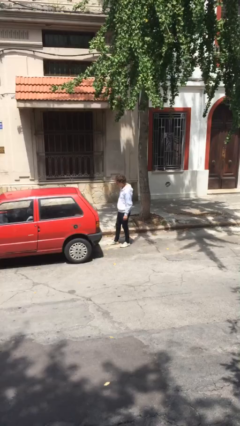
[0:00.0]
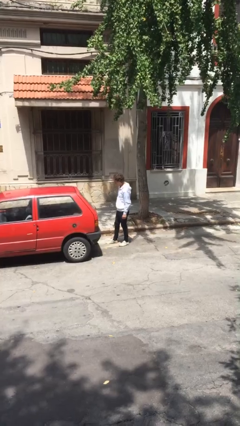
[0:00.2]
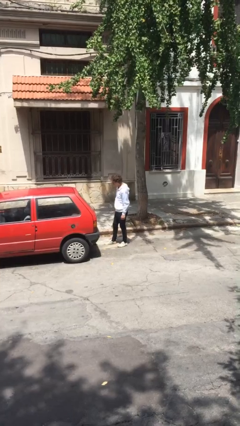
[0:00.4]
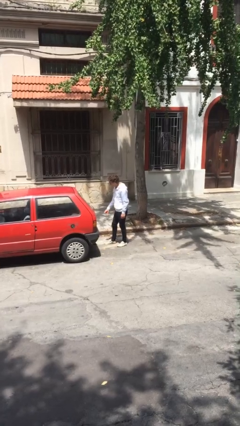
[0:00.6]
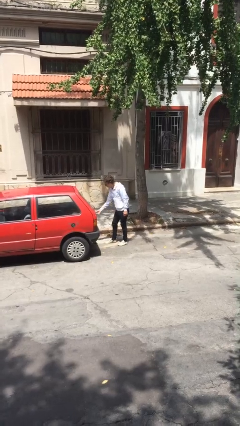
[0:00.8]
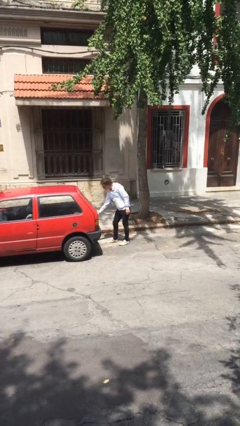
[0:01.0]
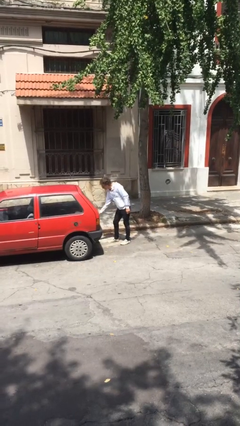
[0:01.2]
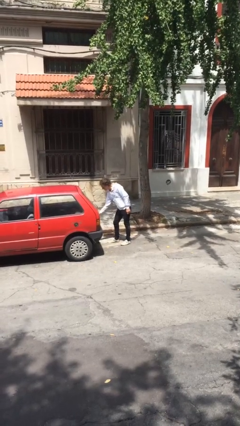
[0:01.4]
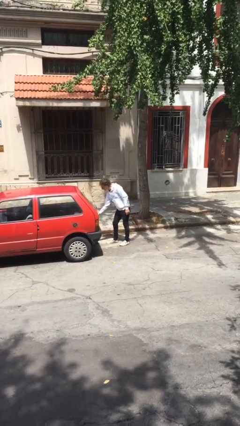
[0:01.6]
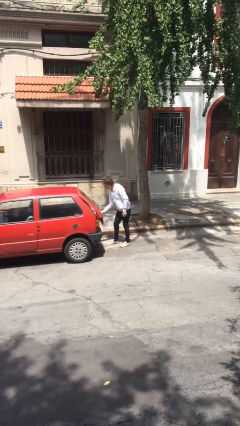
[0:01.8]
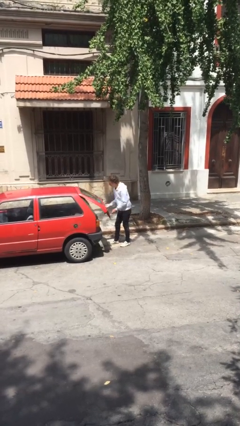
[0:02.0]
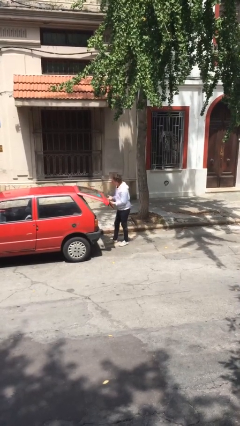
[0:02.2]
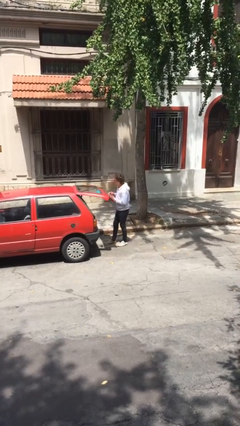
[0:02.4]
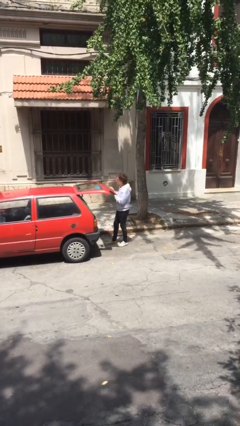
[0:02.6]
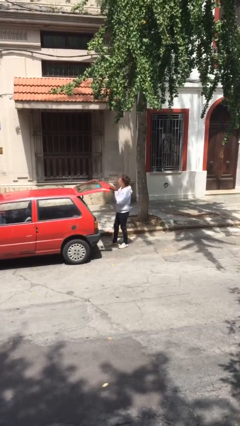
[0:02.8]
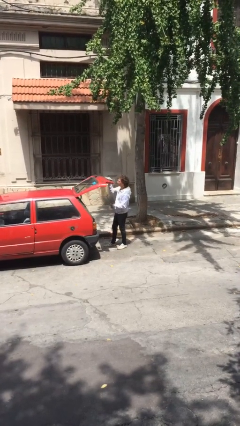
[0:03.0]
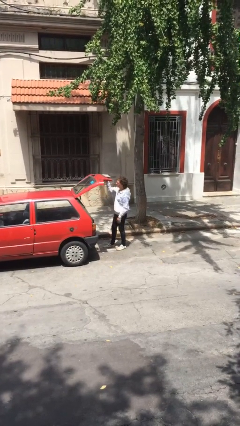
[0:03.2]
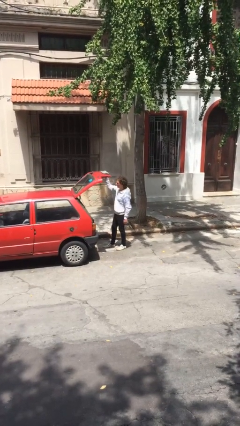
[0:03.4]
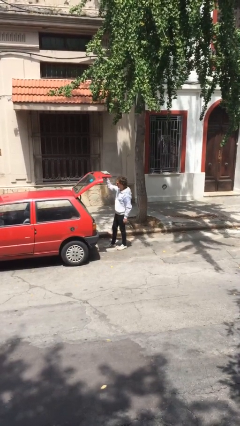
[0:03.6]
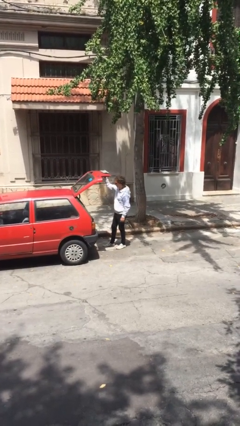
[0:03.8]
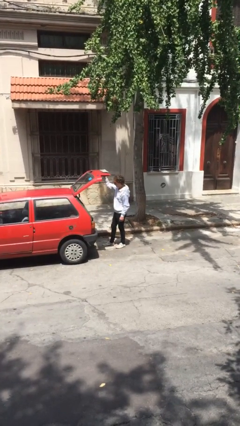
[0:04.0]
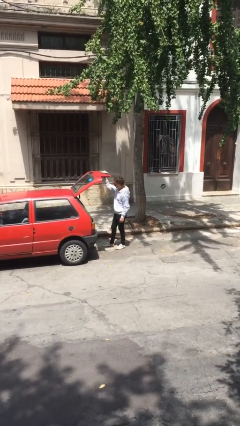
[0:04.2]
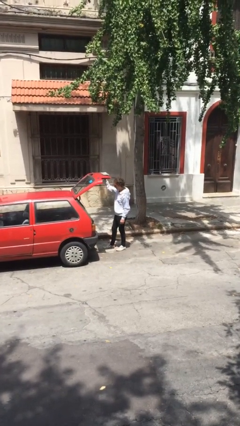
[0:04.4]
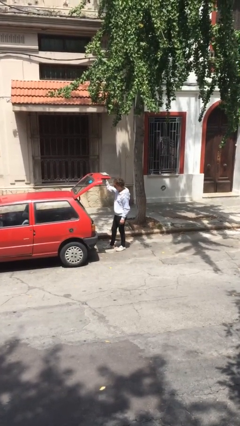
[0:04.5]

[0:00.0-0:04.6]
person opens car trunk

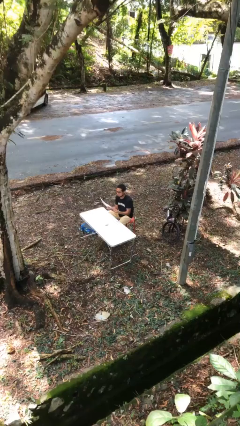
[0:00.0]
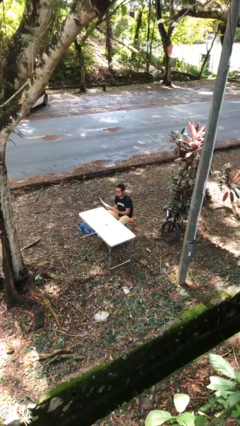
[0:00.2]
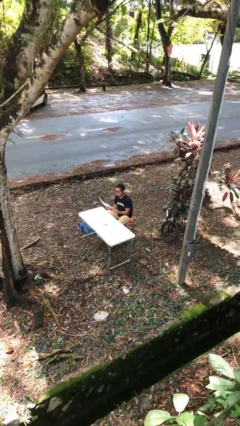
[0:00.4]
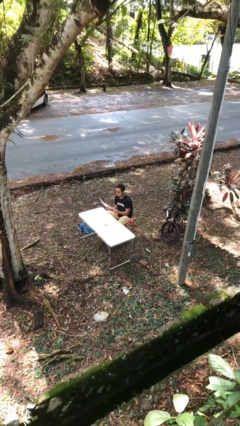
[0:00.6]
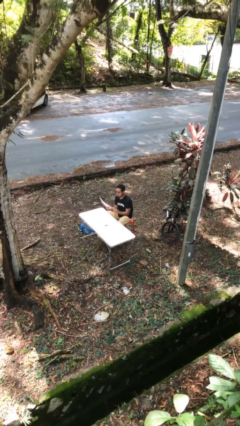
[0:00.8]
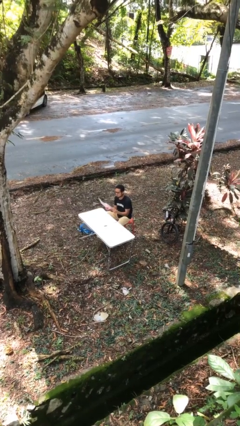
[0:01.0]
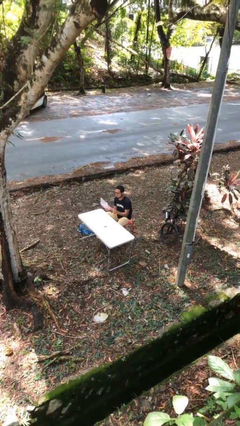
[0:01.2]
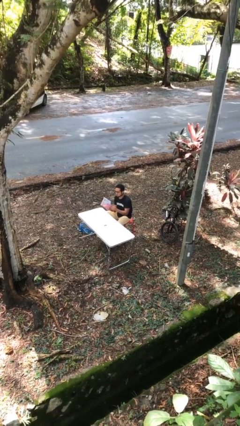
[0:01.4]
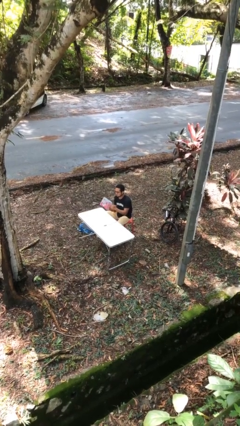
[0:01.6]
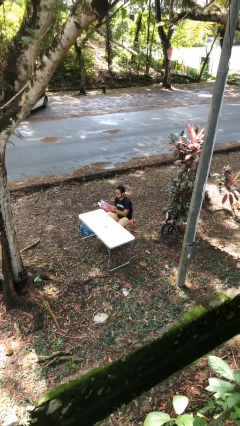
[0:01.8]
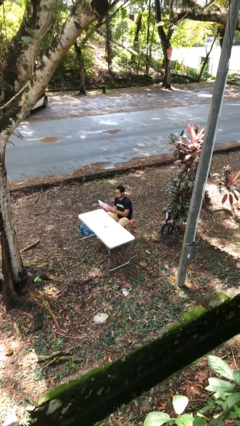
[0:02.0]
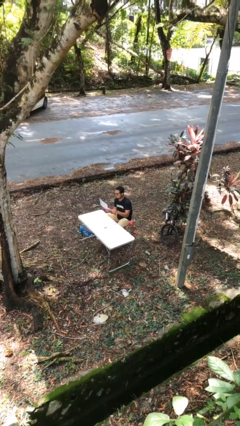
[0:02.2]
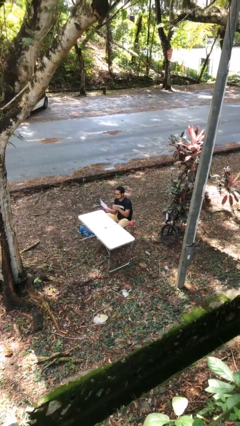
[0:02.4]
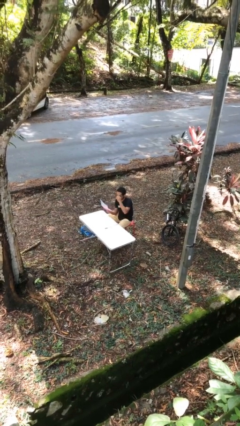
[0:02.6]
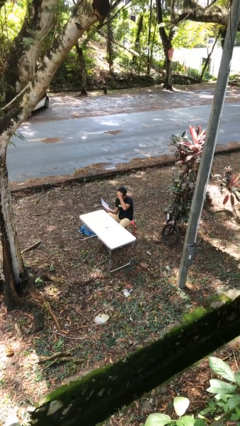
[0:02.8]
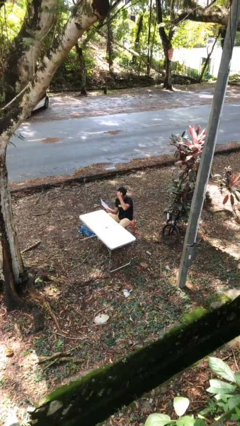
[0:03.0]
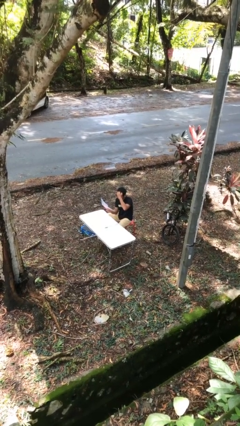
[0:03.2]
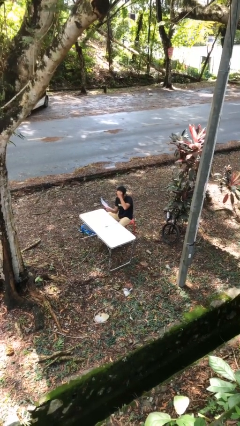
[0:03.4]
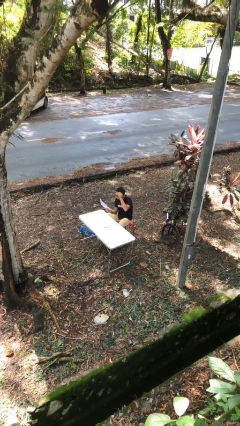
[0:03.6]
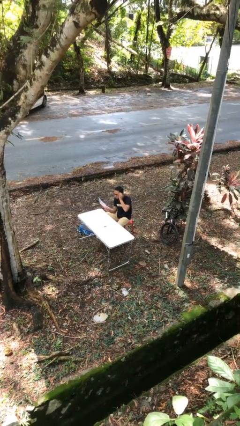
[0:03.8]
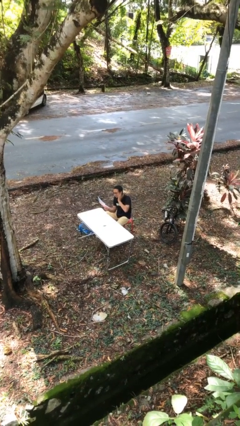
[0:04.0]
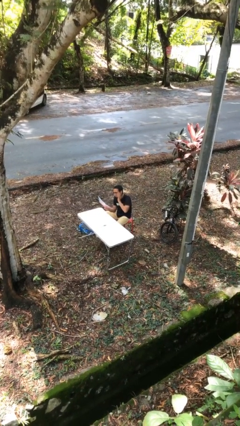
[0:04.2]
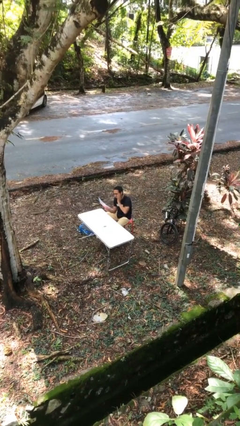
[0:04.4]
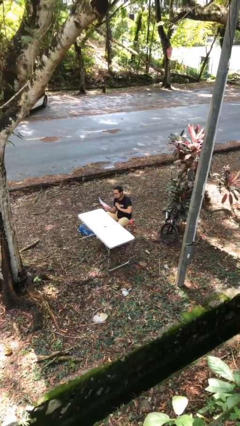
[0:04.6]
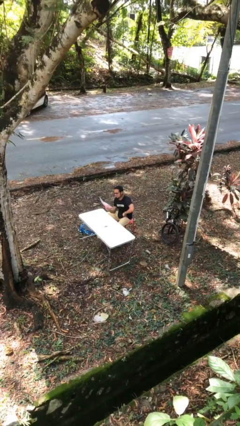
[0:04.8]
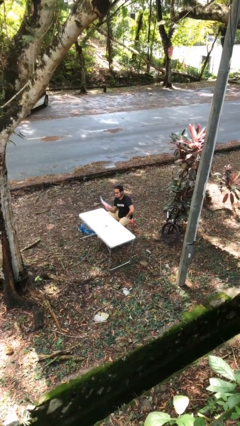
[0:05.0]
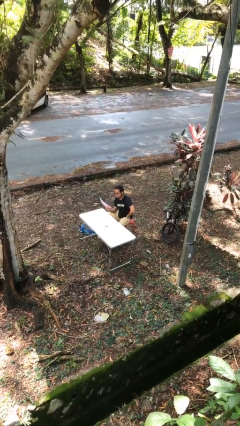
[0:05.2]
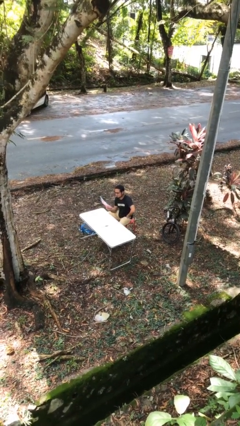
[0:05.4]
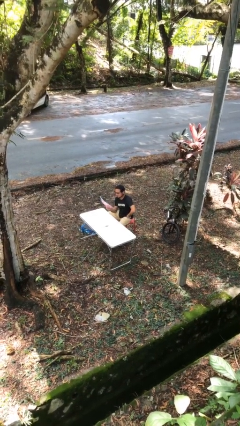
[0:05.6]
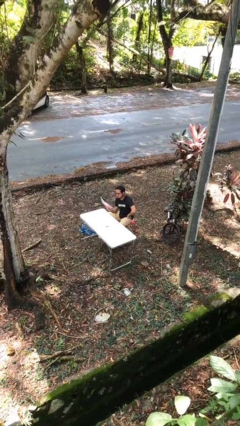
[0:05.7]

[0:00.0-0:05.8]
person reads document

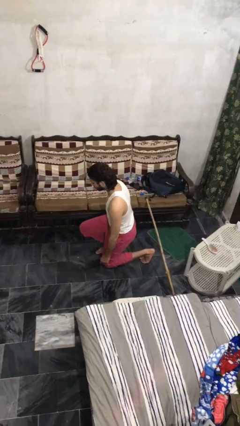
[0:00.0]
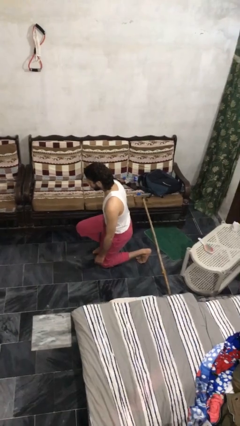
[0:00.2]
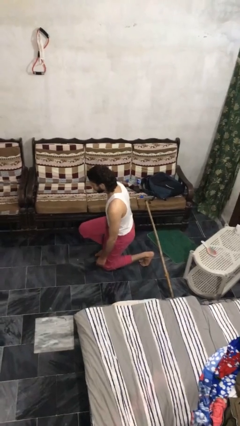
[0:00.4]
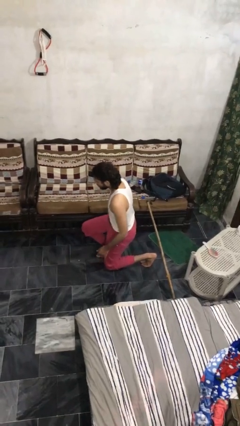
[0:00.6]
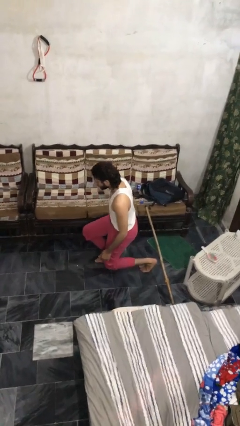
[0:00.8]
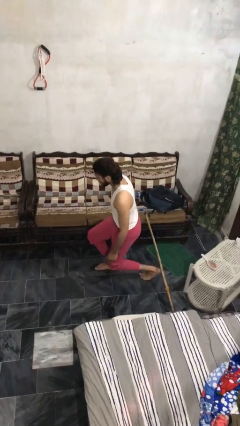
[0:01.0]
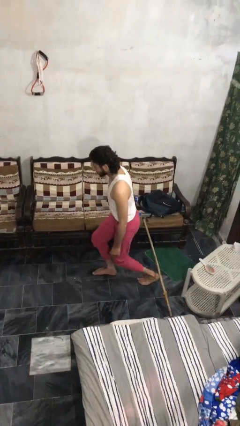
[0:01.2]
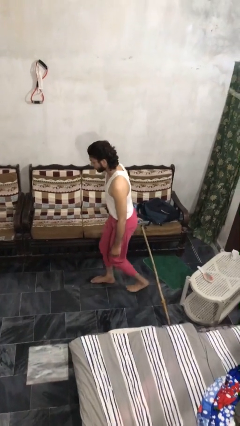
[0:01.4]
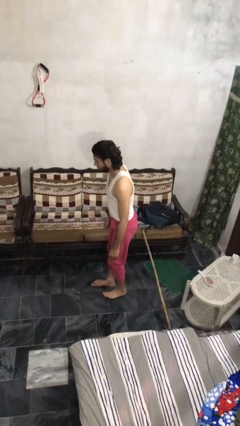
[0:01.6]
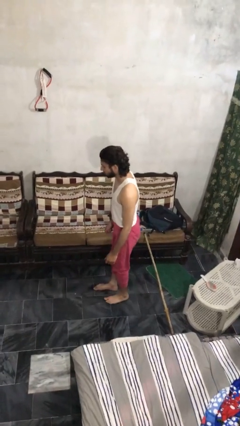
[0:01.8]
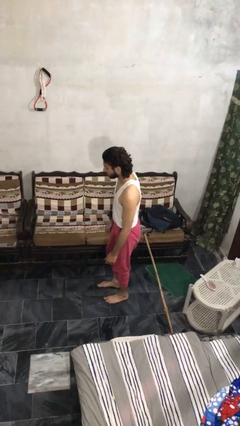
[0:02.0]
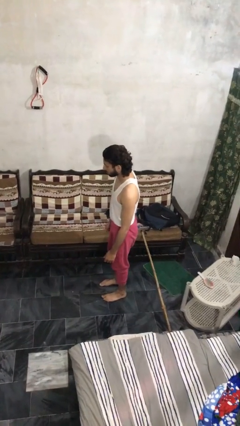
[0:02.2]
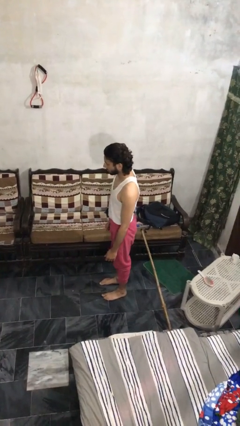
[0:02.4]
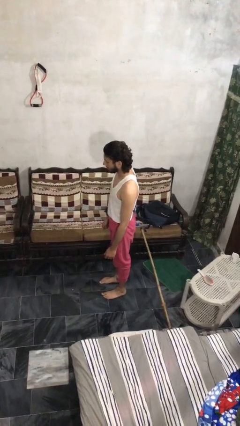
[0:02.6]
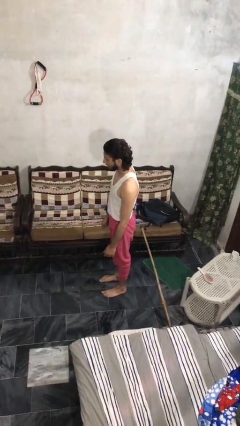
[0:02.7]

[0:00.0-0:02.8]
person stands up from floor

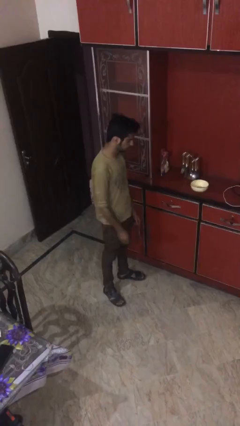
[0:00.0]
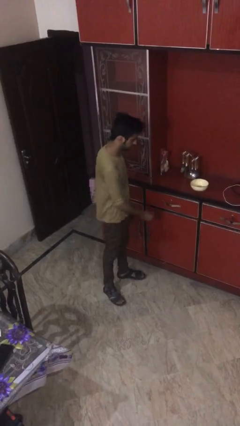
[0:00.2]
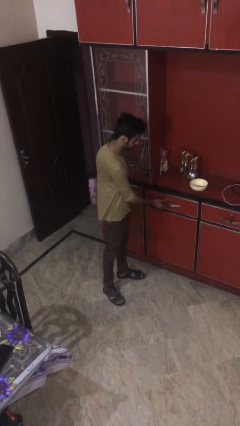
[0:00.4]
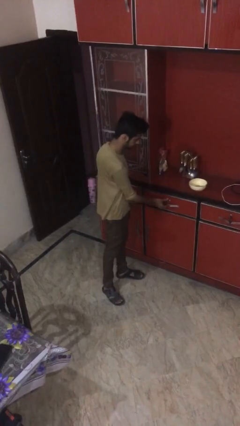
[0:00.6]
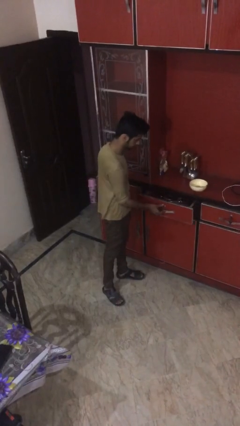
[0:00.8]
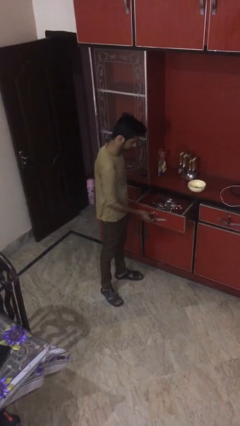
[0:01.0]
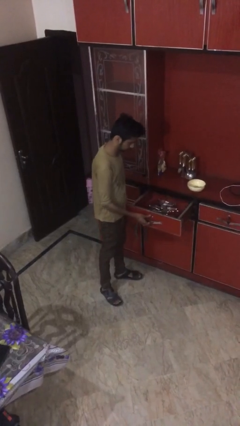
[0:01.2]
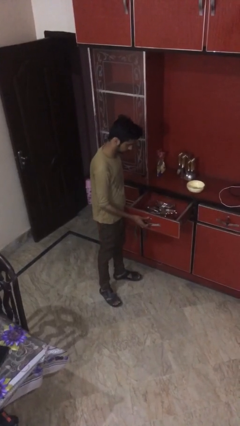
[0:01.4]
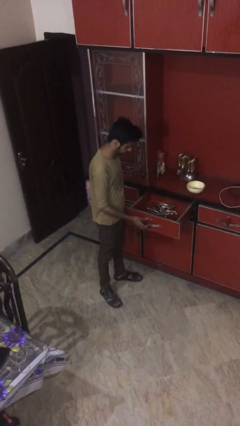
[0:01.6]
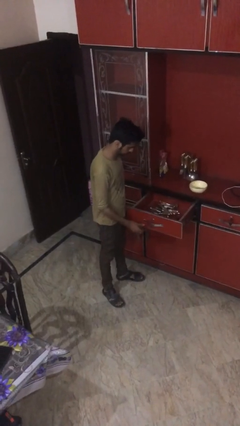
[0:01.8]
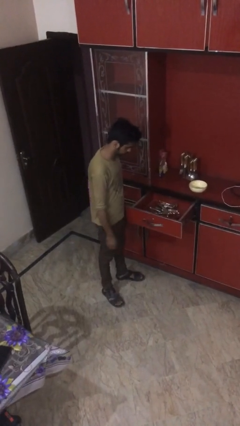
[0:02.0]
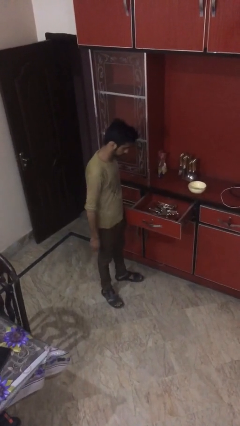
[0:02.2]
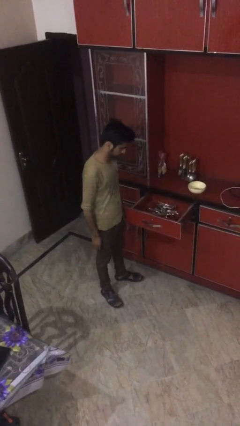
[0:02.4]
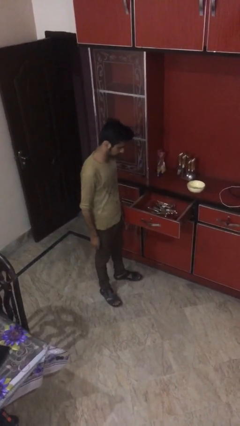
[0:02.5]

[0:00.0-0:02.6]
person opens kitchen drawer

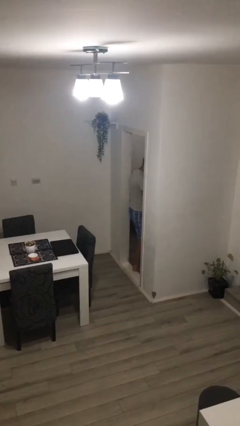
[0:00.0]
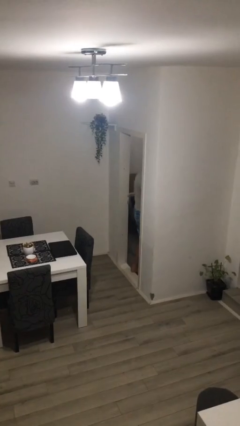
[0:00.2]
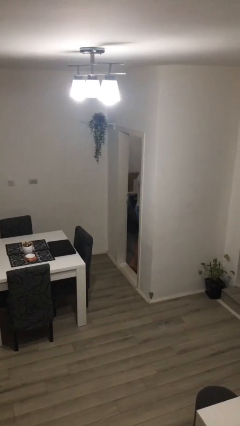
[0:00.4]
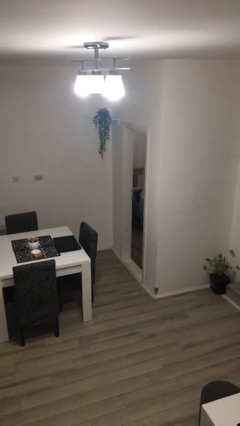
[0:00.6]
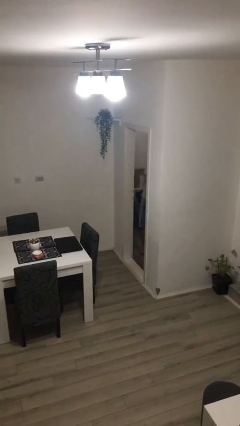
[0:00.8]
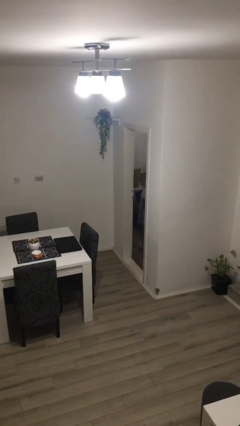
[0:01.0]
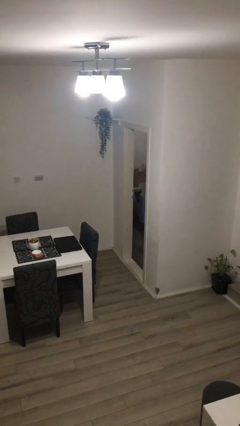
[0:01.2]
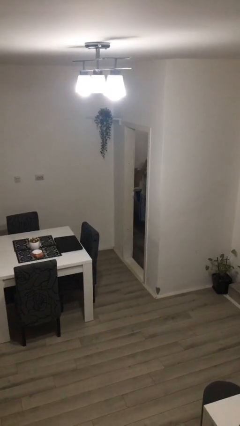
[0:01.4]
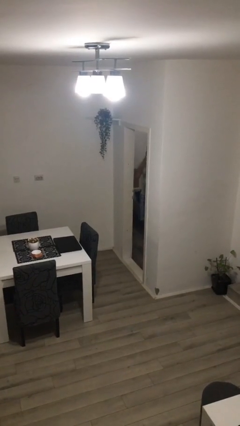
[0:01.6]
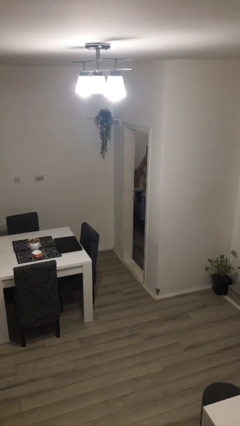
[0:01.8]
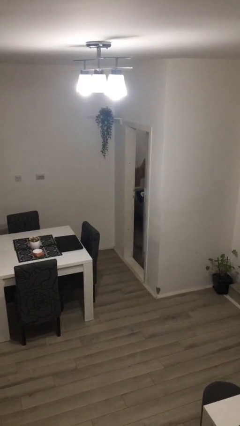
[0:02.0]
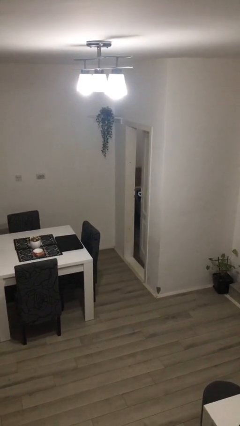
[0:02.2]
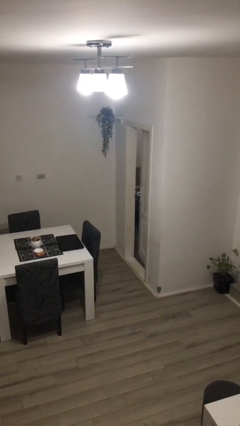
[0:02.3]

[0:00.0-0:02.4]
person exits scene through structure
